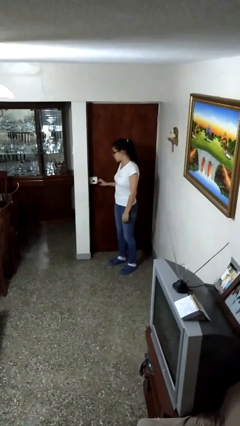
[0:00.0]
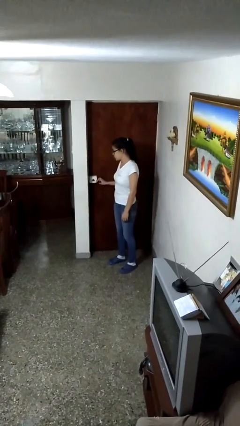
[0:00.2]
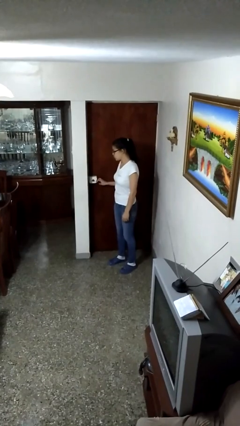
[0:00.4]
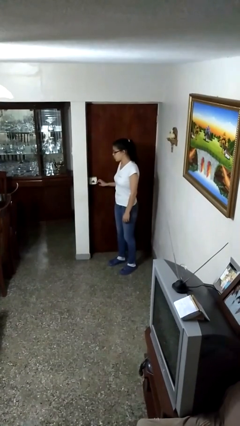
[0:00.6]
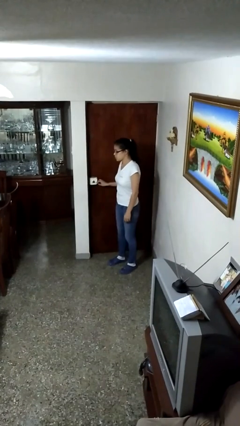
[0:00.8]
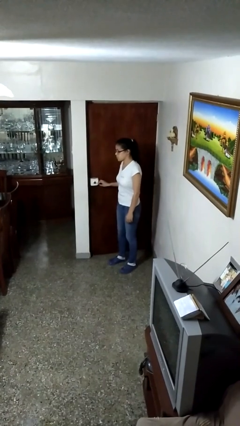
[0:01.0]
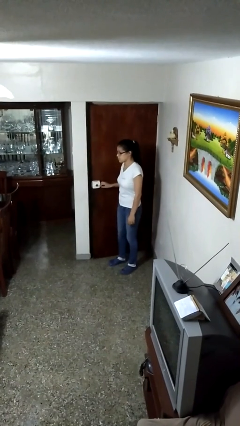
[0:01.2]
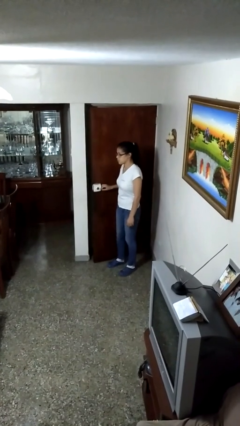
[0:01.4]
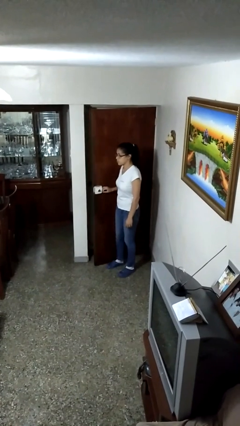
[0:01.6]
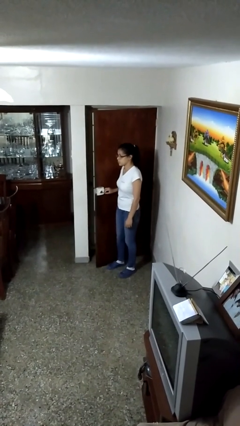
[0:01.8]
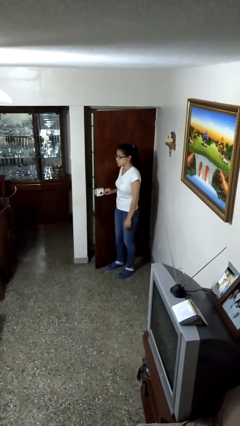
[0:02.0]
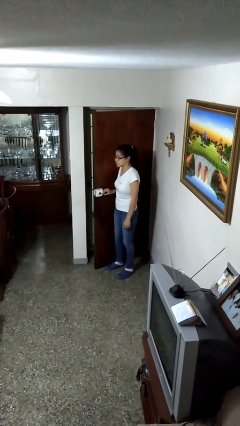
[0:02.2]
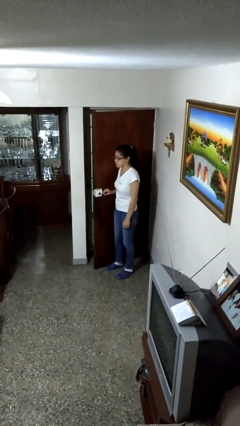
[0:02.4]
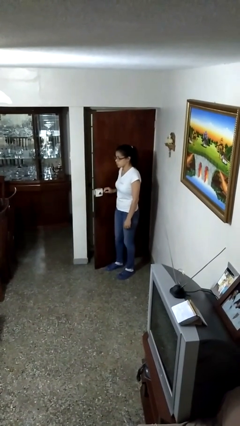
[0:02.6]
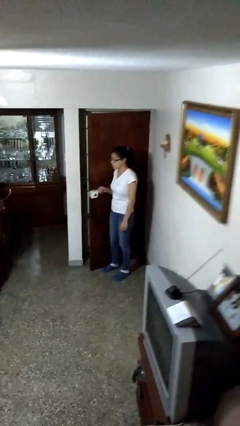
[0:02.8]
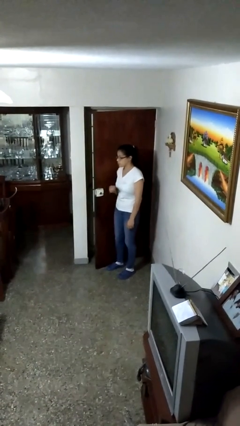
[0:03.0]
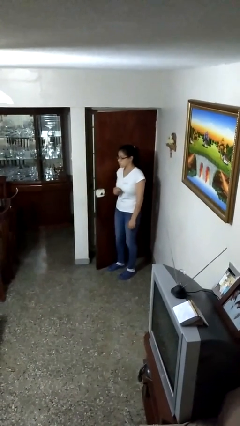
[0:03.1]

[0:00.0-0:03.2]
person opens facility door

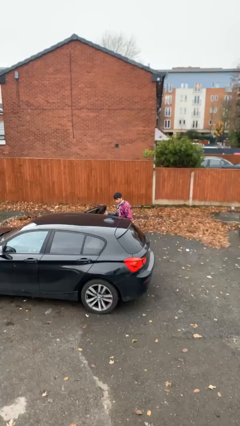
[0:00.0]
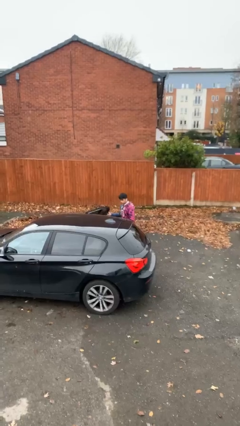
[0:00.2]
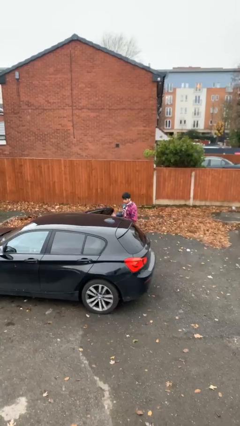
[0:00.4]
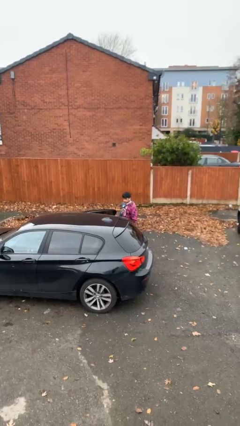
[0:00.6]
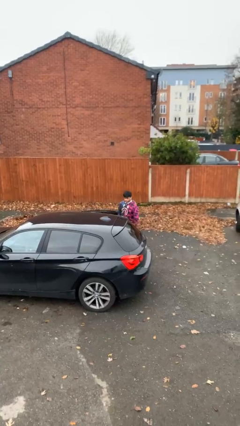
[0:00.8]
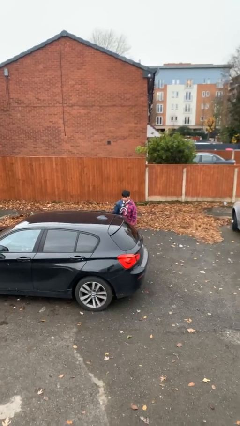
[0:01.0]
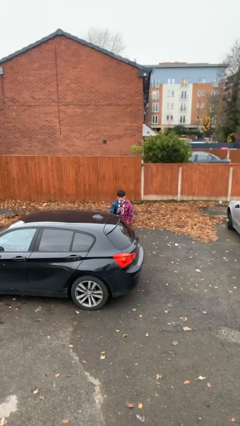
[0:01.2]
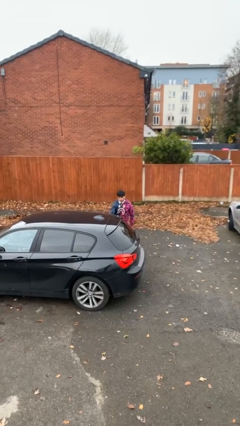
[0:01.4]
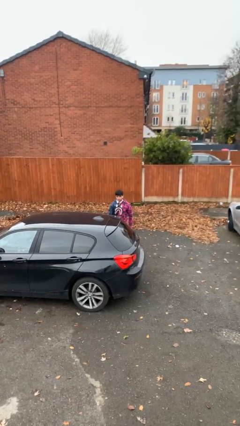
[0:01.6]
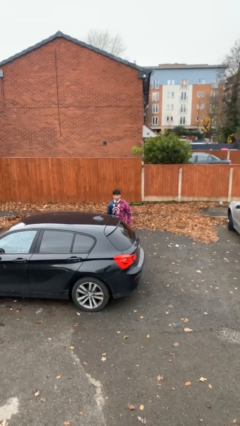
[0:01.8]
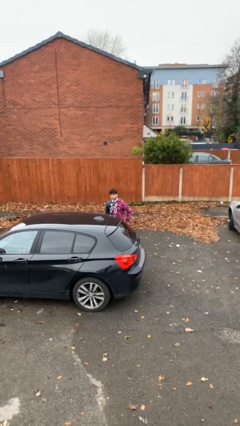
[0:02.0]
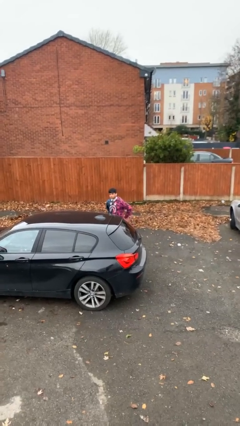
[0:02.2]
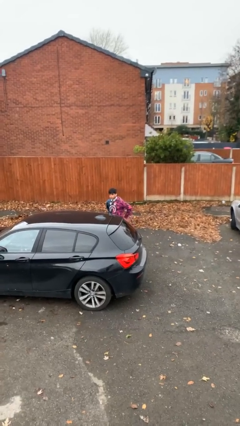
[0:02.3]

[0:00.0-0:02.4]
person closes car door

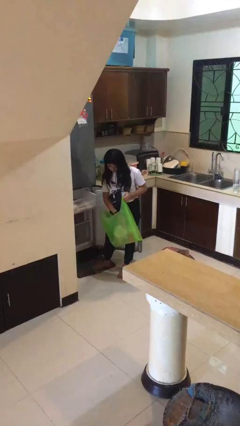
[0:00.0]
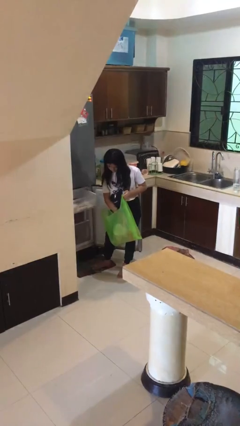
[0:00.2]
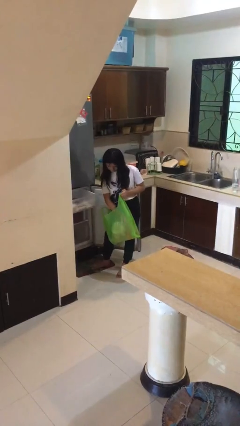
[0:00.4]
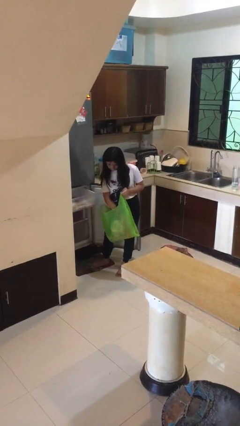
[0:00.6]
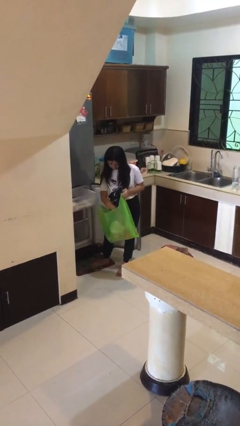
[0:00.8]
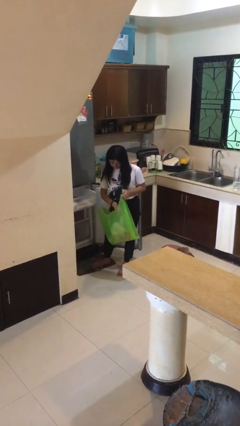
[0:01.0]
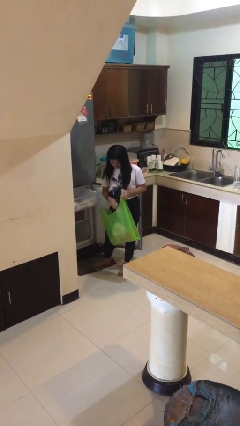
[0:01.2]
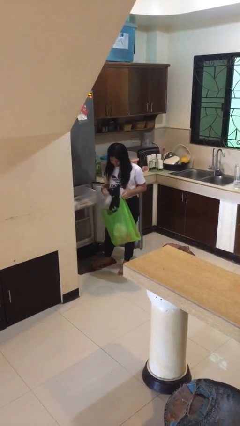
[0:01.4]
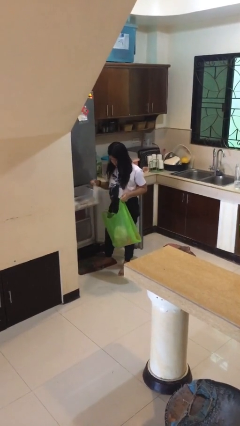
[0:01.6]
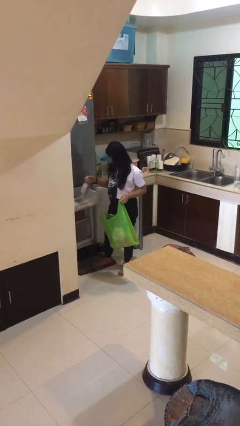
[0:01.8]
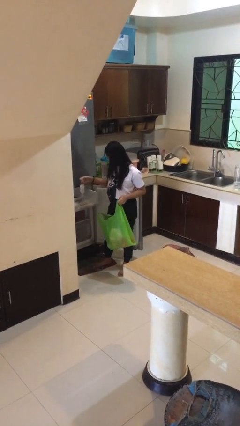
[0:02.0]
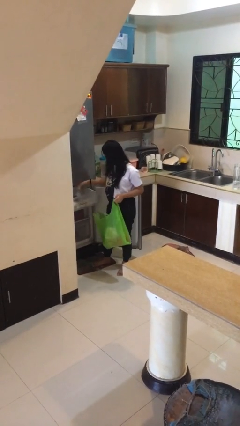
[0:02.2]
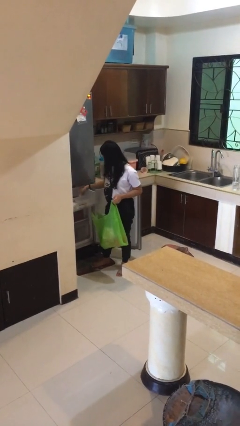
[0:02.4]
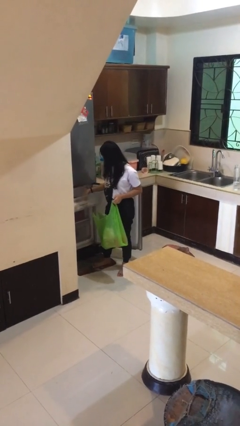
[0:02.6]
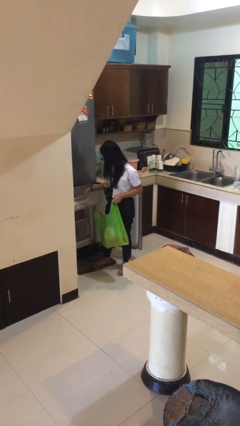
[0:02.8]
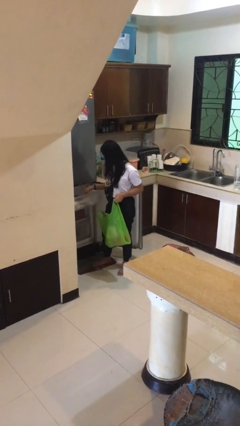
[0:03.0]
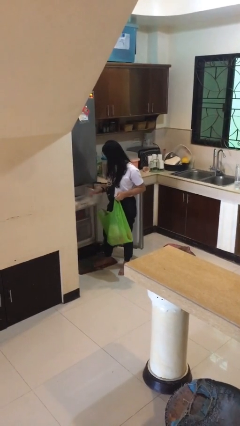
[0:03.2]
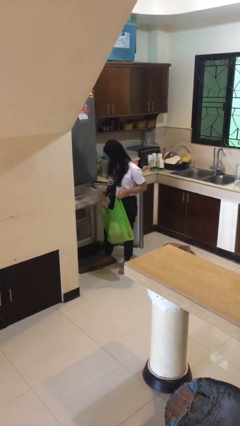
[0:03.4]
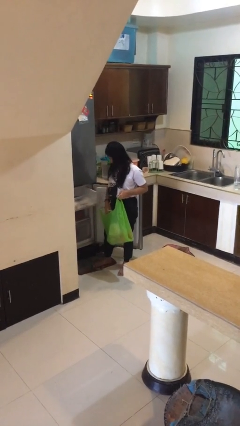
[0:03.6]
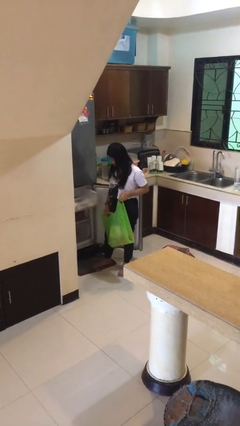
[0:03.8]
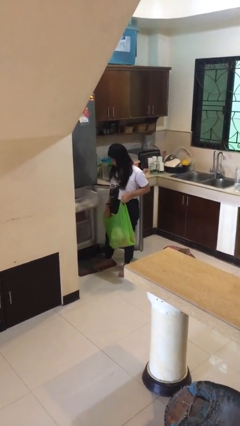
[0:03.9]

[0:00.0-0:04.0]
person loads groceries into refrigerator

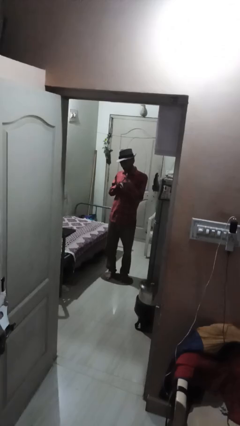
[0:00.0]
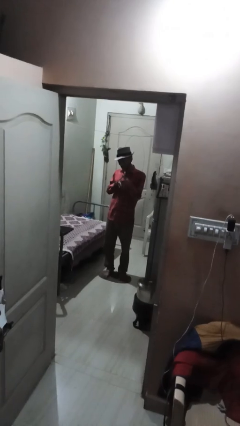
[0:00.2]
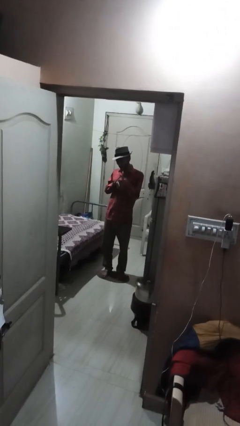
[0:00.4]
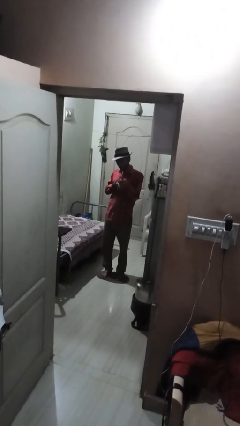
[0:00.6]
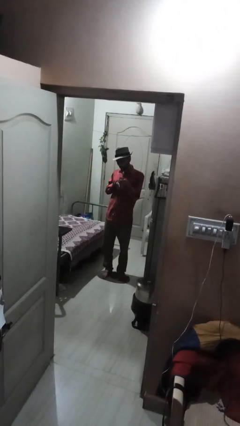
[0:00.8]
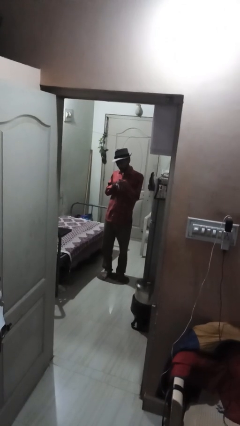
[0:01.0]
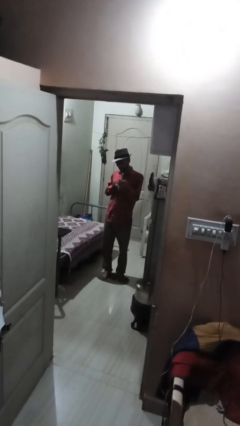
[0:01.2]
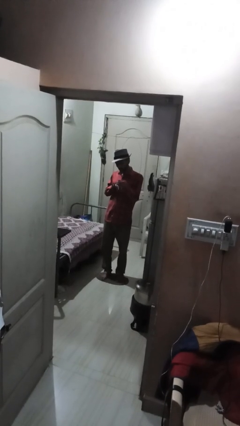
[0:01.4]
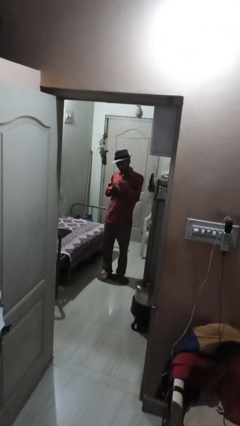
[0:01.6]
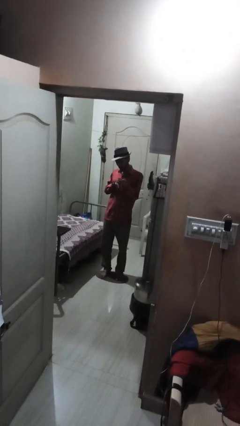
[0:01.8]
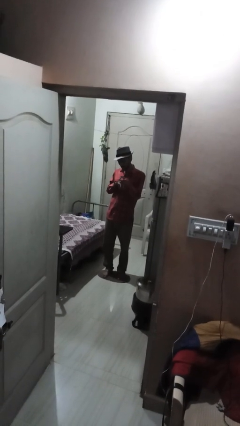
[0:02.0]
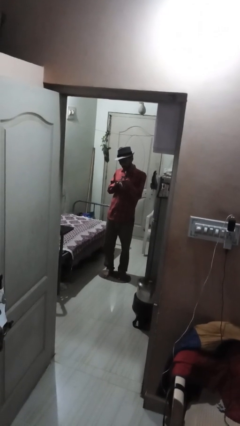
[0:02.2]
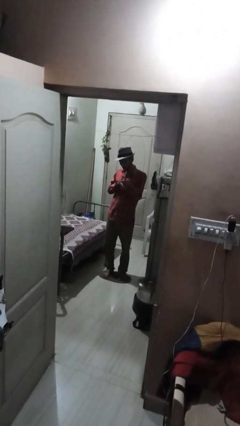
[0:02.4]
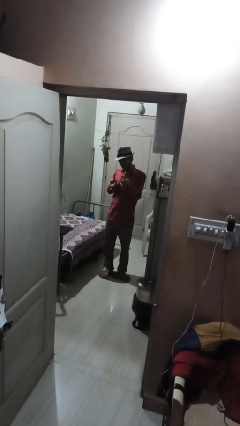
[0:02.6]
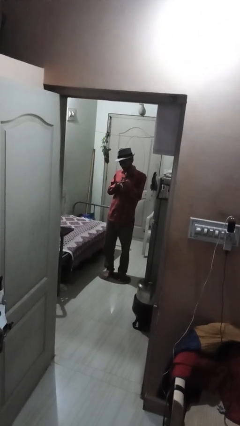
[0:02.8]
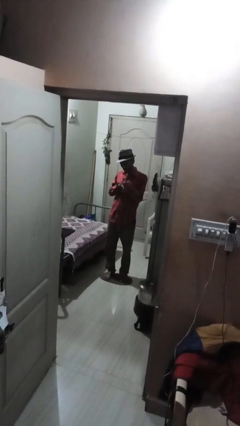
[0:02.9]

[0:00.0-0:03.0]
person clips fingernails

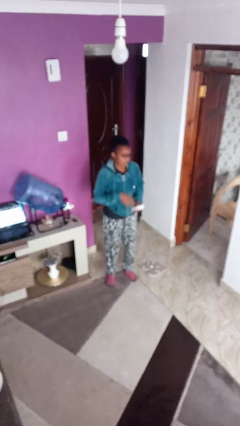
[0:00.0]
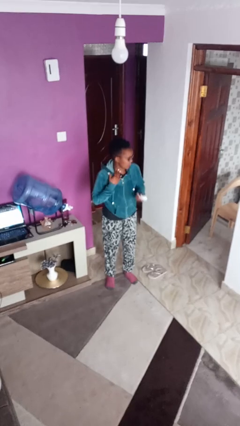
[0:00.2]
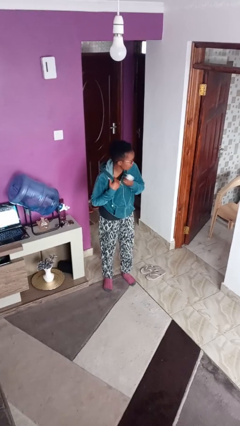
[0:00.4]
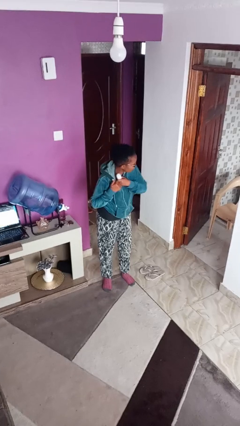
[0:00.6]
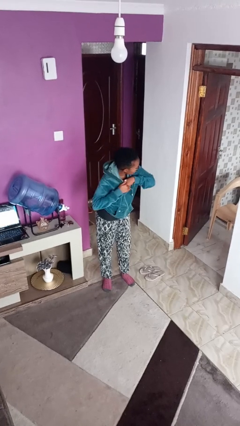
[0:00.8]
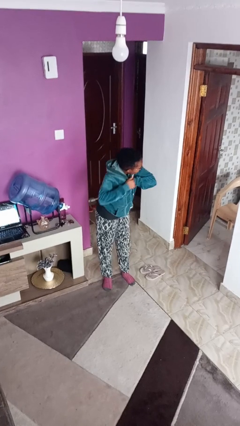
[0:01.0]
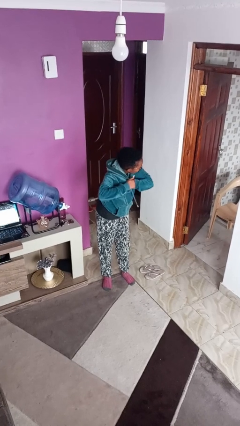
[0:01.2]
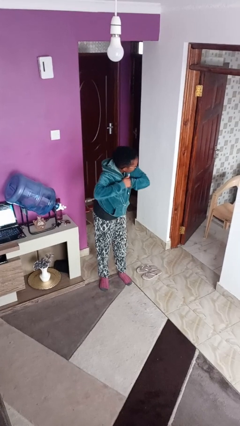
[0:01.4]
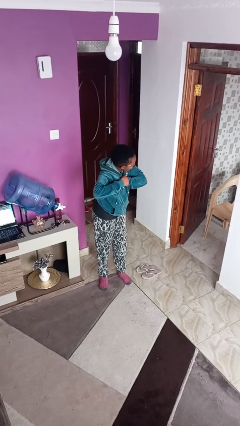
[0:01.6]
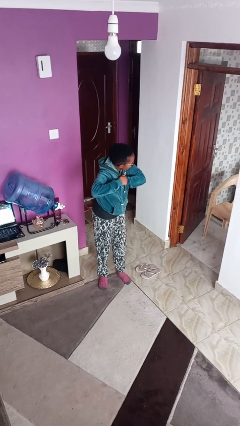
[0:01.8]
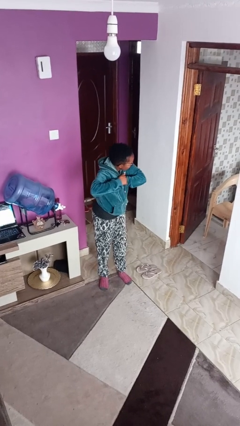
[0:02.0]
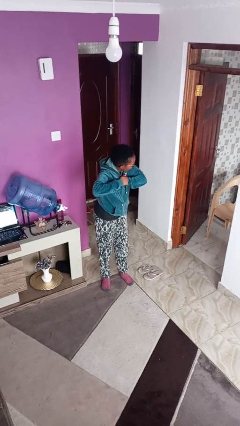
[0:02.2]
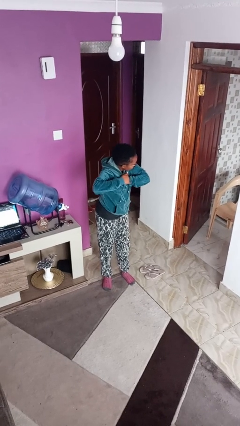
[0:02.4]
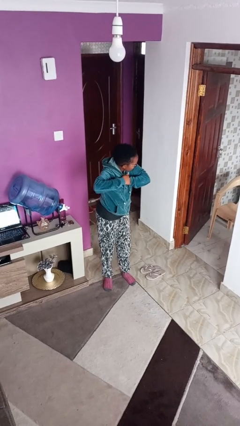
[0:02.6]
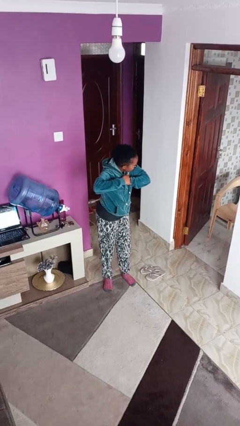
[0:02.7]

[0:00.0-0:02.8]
person applies deodorant

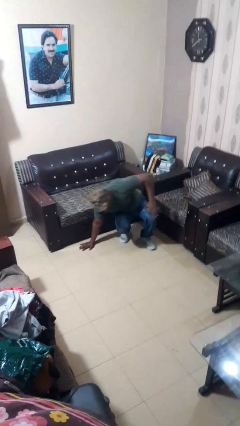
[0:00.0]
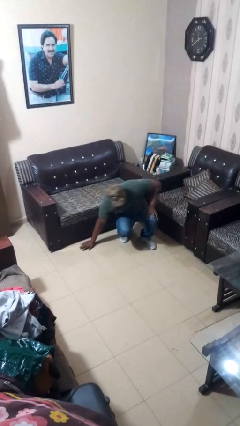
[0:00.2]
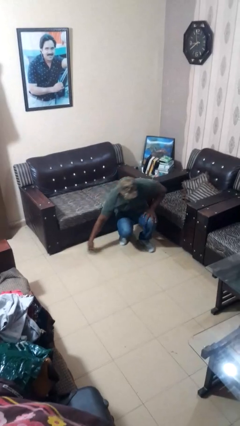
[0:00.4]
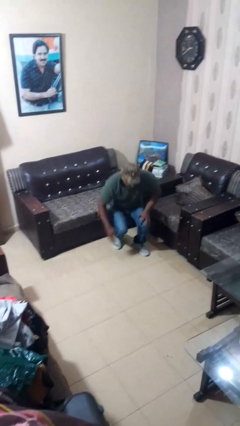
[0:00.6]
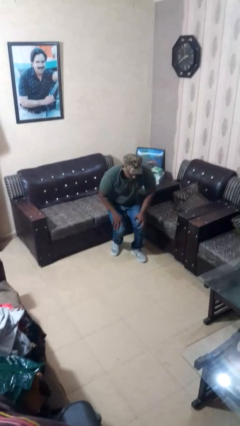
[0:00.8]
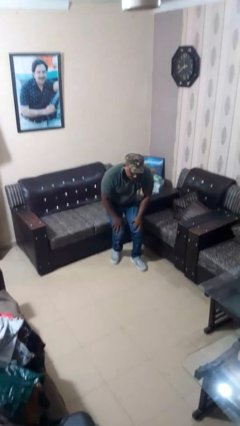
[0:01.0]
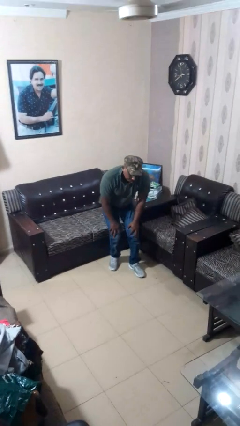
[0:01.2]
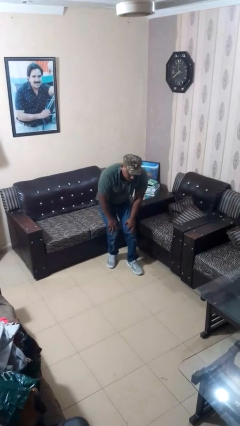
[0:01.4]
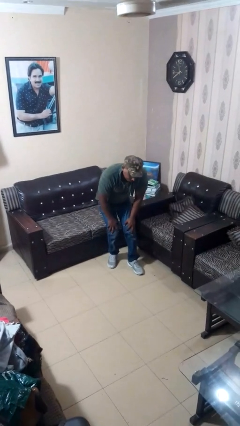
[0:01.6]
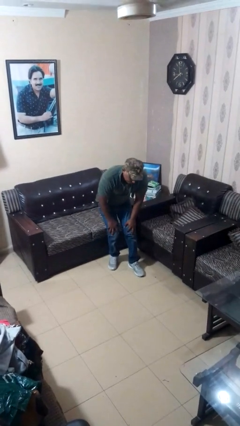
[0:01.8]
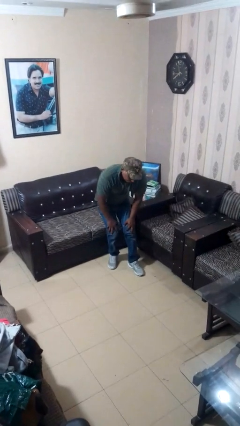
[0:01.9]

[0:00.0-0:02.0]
person stands up from floor
